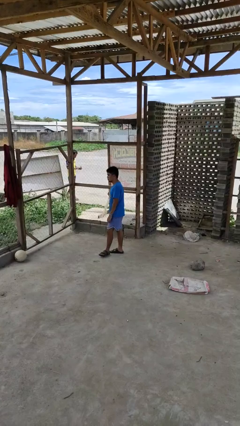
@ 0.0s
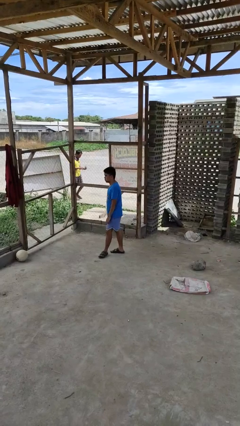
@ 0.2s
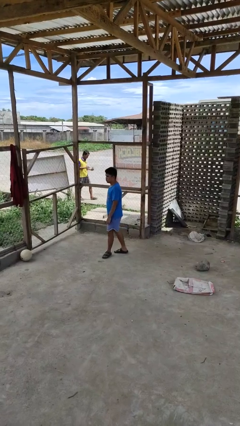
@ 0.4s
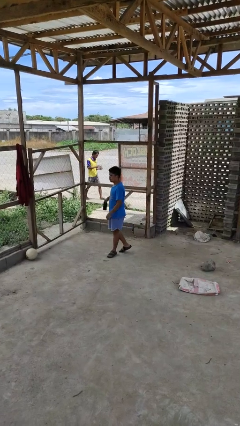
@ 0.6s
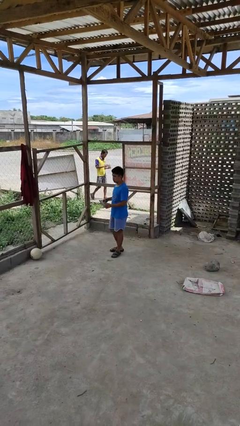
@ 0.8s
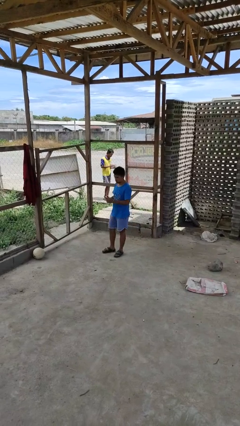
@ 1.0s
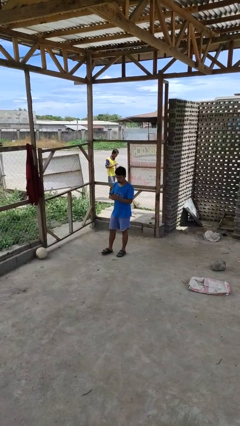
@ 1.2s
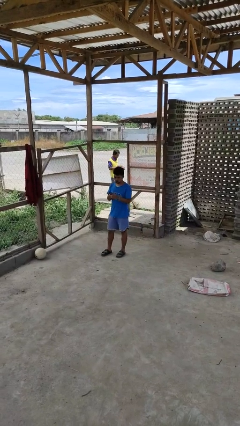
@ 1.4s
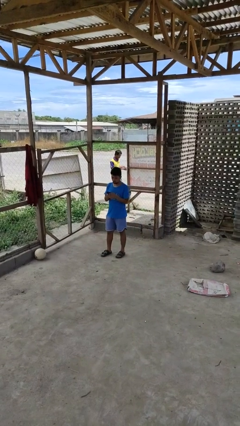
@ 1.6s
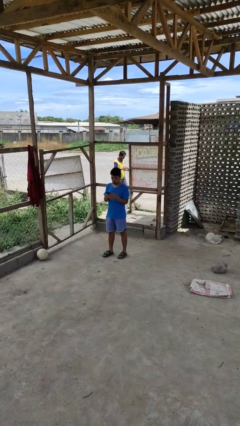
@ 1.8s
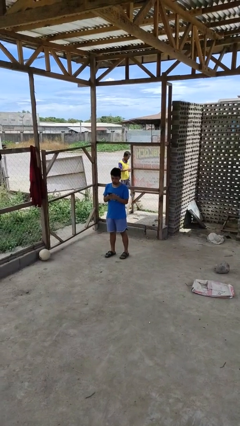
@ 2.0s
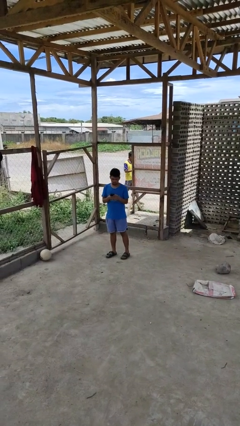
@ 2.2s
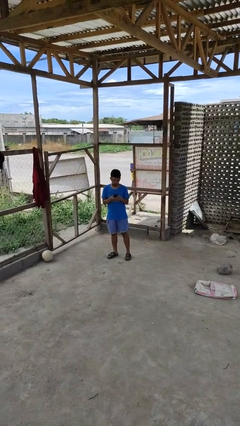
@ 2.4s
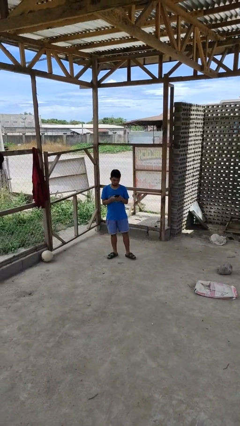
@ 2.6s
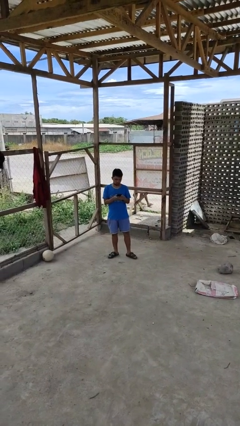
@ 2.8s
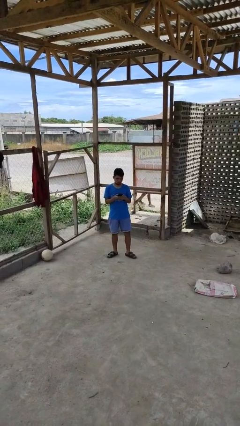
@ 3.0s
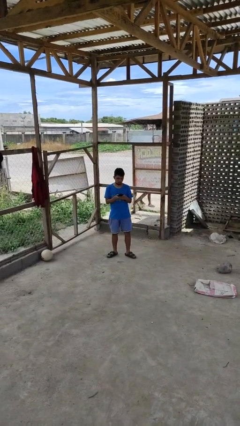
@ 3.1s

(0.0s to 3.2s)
person takes phone from pocket

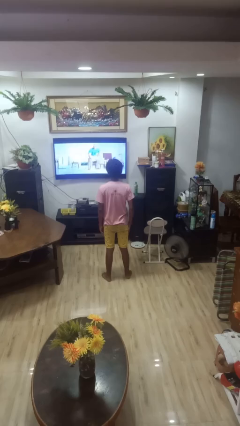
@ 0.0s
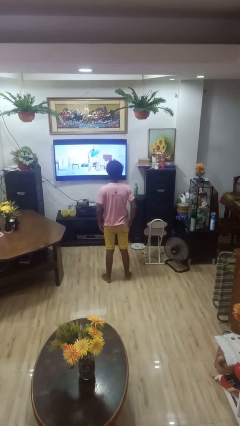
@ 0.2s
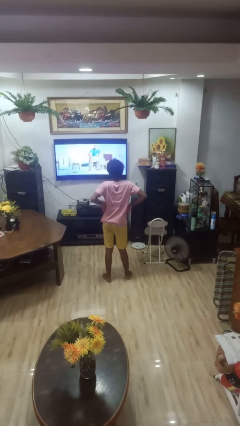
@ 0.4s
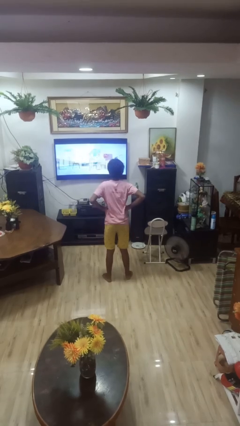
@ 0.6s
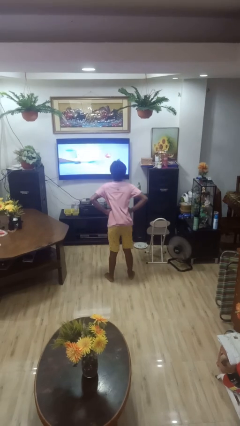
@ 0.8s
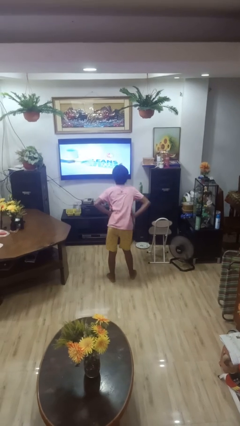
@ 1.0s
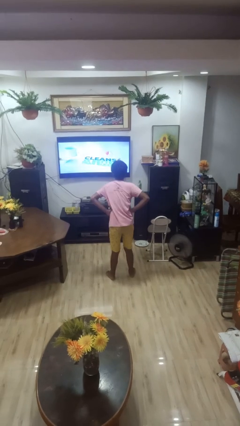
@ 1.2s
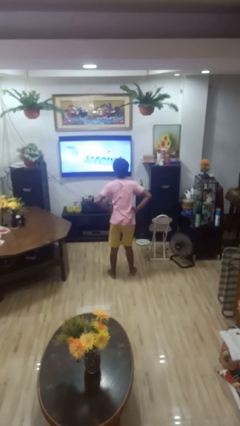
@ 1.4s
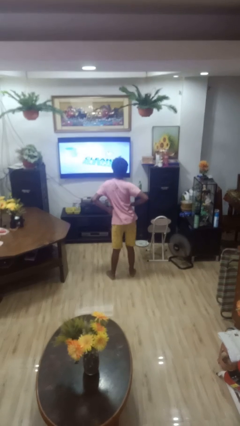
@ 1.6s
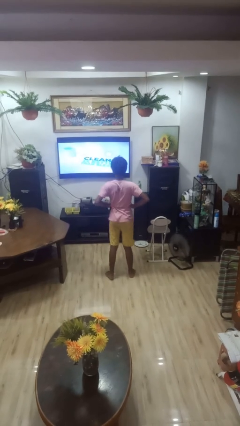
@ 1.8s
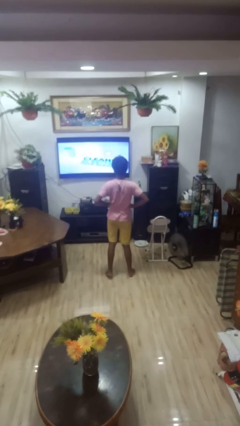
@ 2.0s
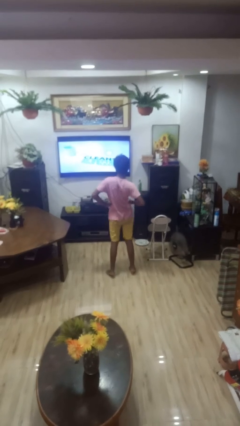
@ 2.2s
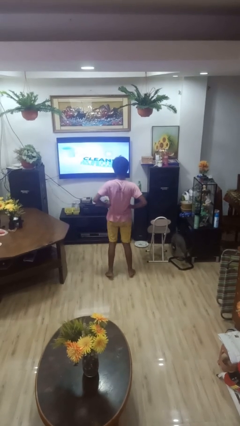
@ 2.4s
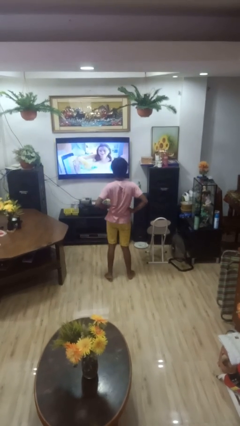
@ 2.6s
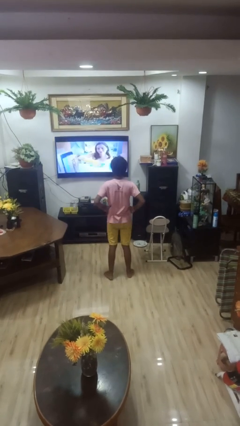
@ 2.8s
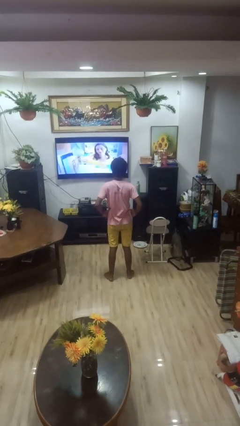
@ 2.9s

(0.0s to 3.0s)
person wiggles hips

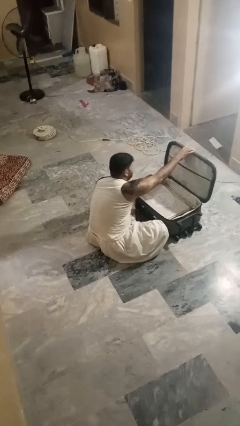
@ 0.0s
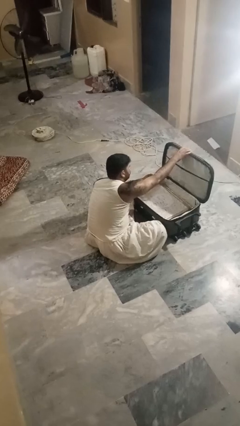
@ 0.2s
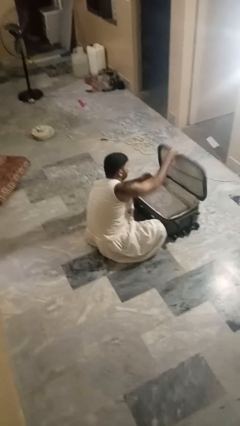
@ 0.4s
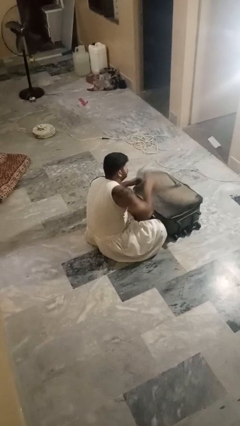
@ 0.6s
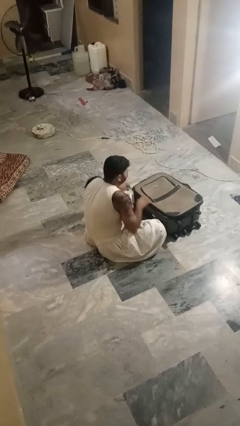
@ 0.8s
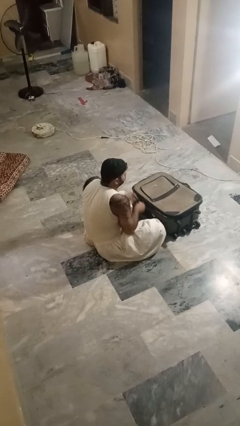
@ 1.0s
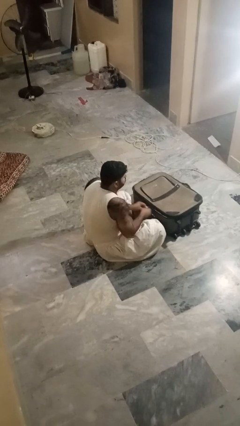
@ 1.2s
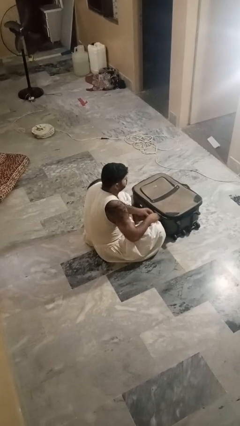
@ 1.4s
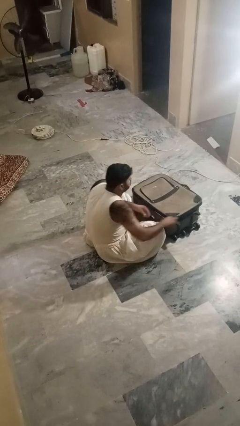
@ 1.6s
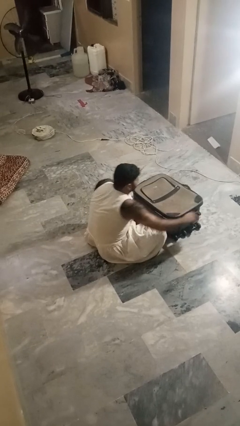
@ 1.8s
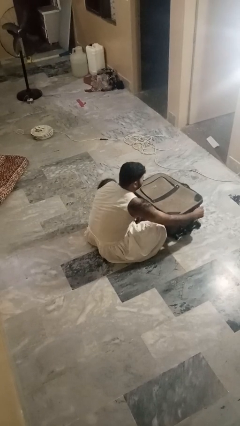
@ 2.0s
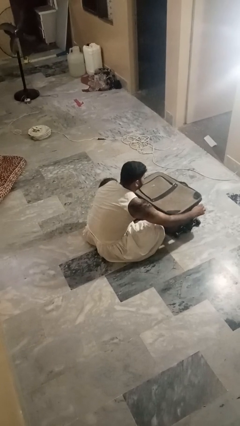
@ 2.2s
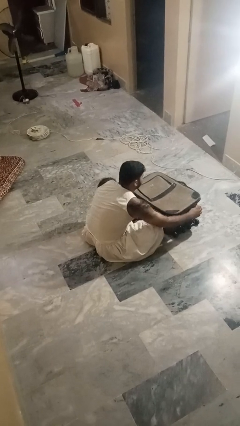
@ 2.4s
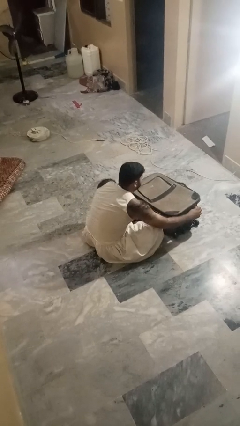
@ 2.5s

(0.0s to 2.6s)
person closes suitcase

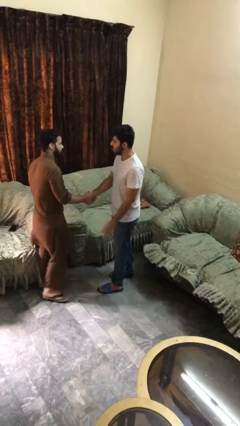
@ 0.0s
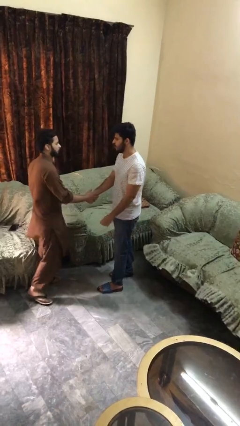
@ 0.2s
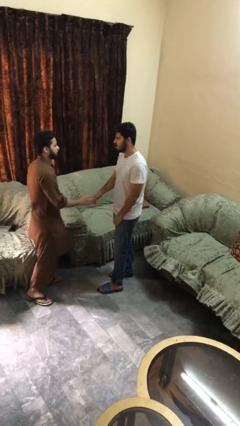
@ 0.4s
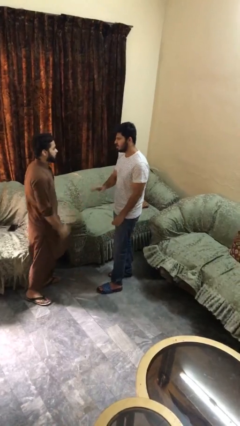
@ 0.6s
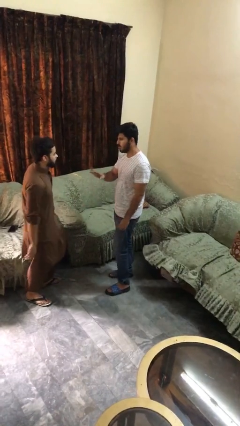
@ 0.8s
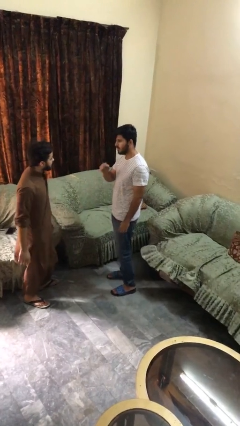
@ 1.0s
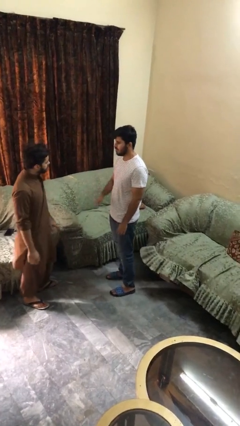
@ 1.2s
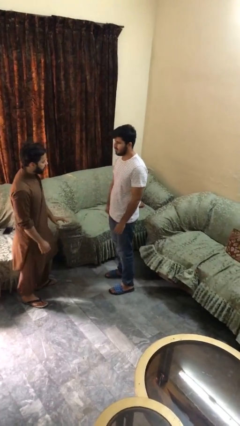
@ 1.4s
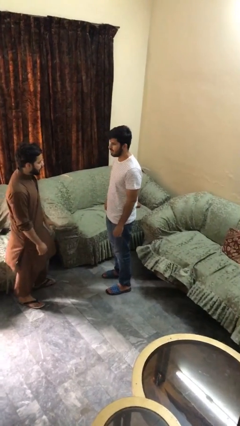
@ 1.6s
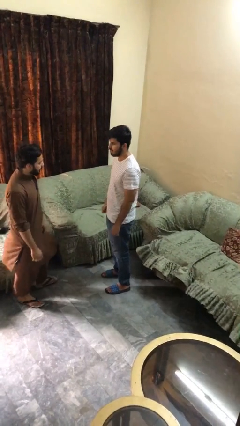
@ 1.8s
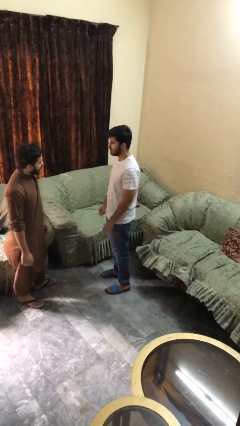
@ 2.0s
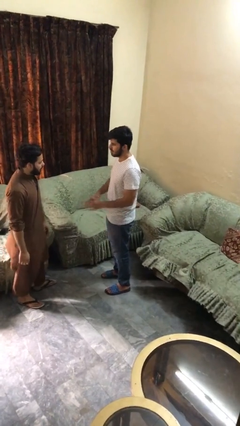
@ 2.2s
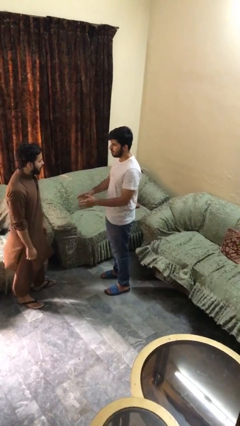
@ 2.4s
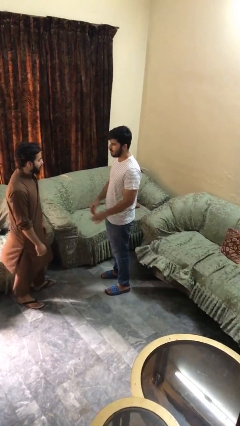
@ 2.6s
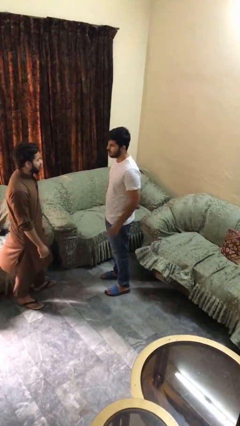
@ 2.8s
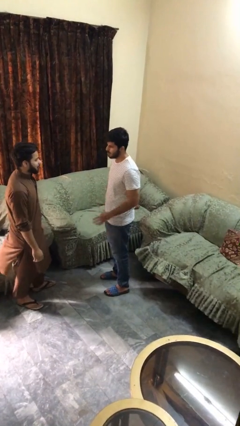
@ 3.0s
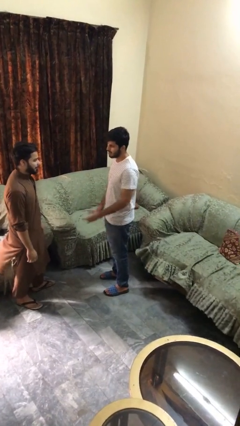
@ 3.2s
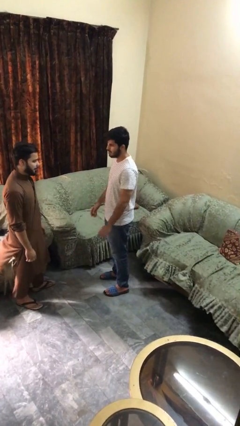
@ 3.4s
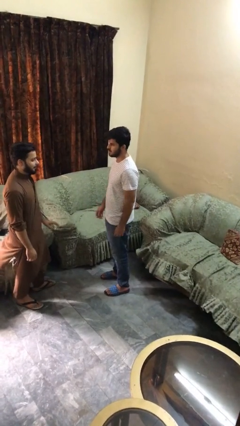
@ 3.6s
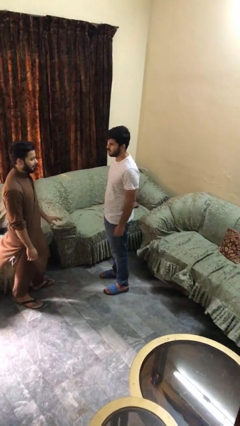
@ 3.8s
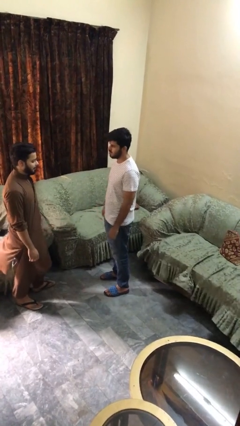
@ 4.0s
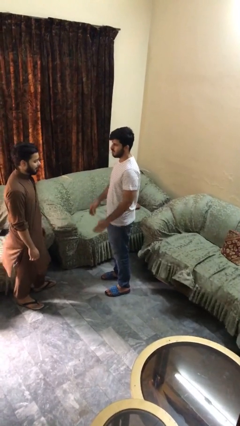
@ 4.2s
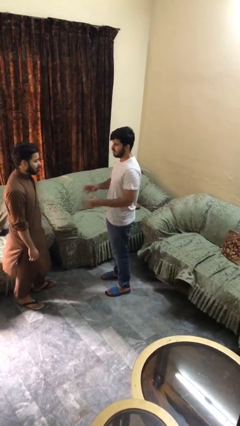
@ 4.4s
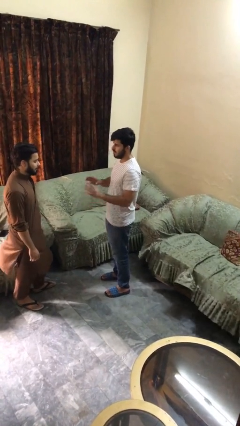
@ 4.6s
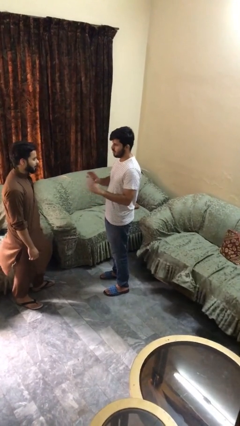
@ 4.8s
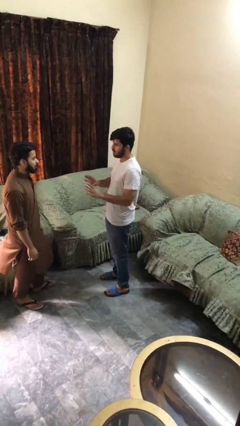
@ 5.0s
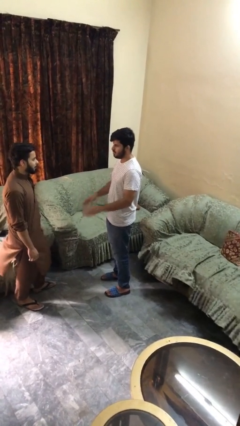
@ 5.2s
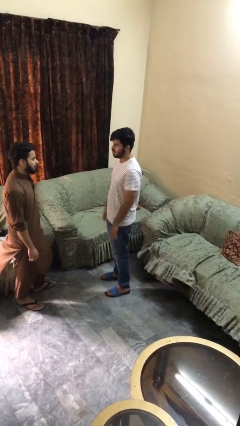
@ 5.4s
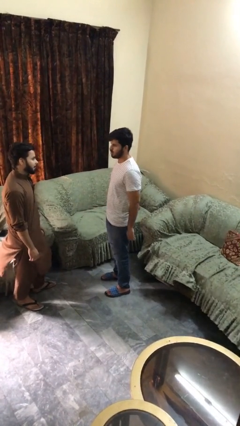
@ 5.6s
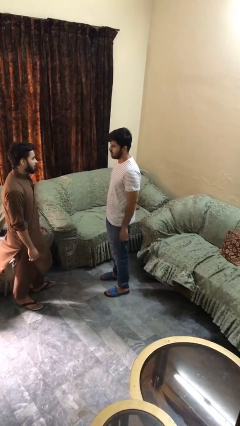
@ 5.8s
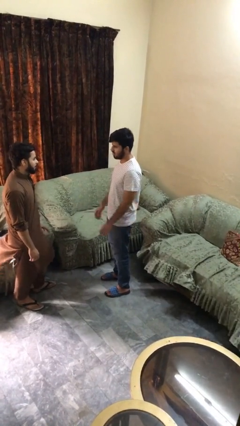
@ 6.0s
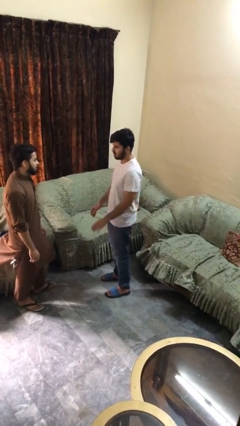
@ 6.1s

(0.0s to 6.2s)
person talks to person

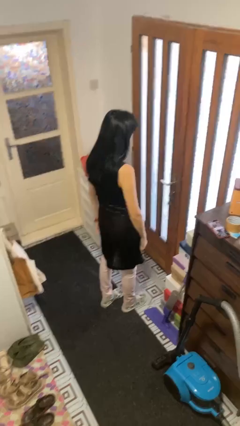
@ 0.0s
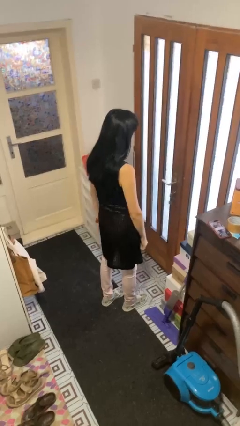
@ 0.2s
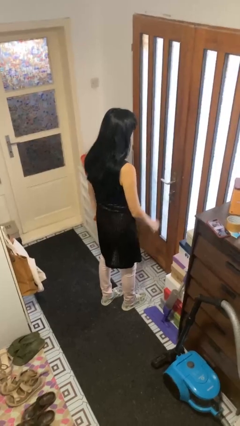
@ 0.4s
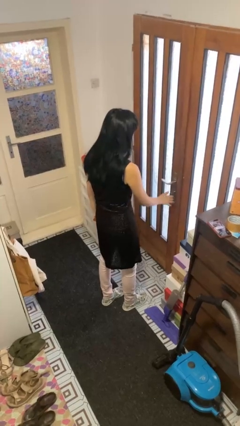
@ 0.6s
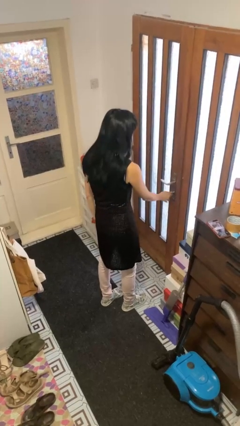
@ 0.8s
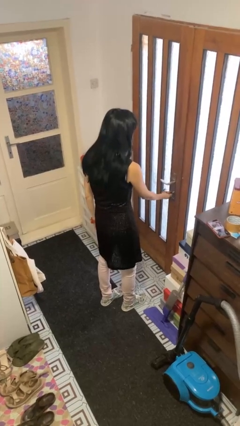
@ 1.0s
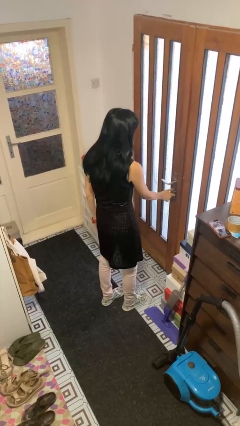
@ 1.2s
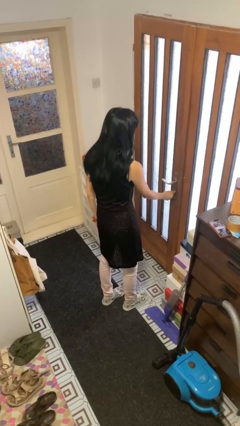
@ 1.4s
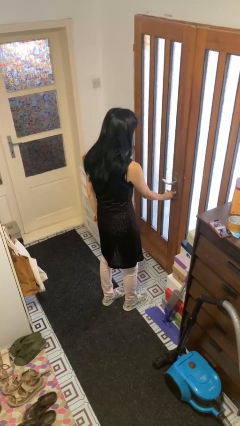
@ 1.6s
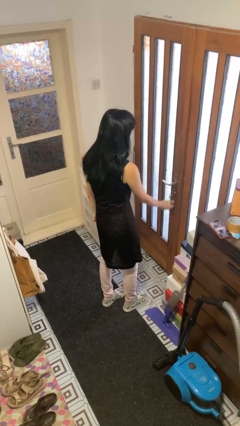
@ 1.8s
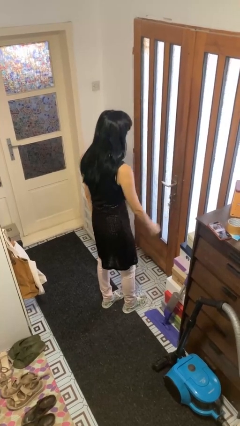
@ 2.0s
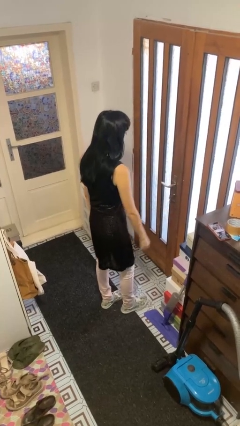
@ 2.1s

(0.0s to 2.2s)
person locks door with keys
